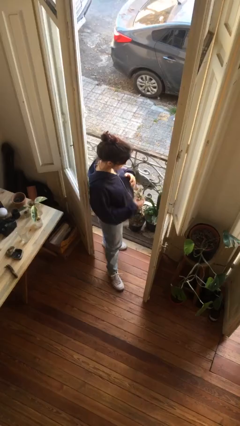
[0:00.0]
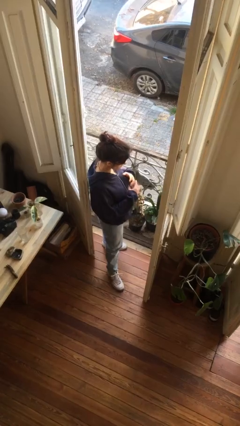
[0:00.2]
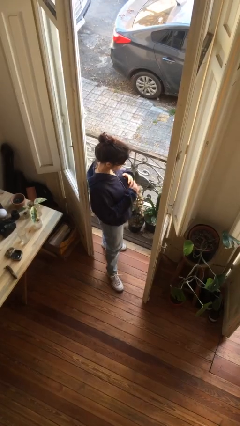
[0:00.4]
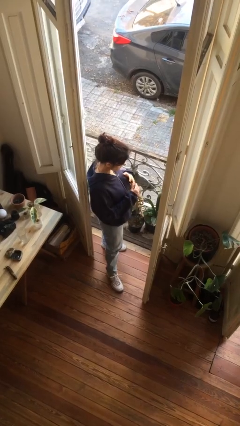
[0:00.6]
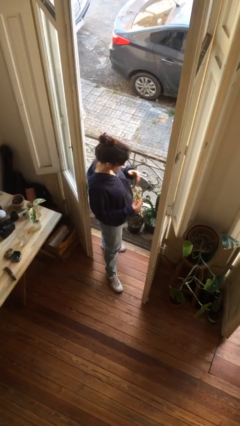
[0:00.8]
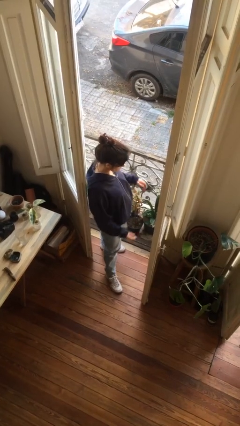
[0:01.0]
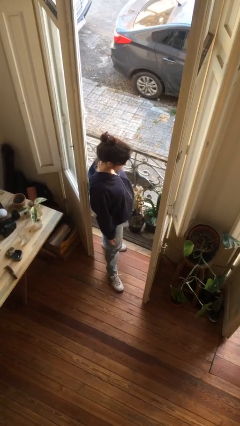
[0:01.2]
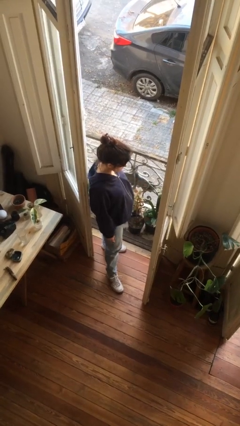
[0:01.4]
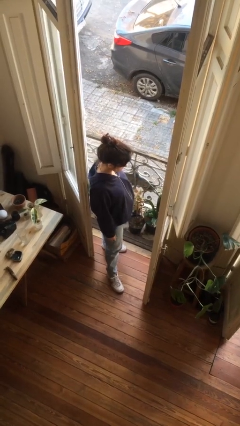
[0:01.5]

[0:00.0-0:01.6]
person takes off ring

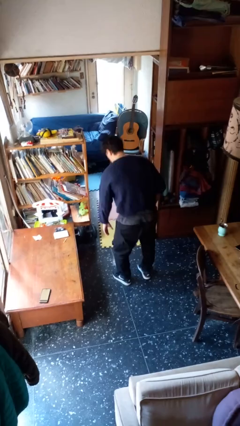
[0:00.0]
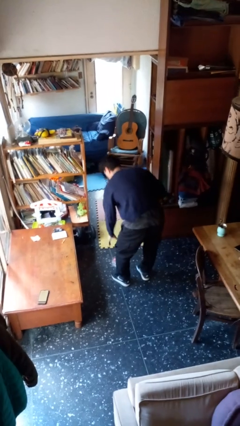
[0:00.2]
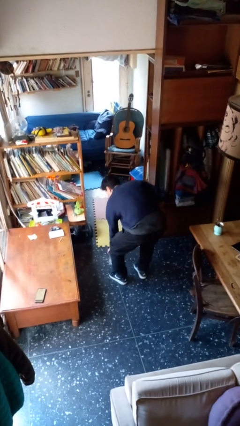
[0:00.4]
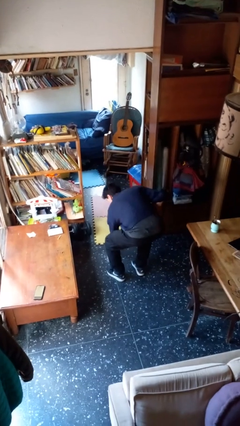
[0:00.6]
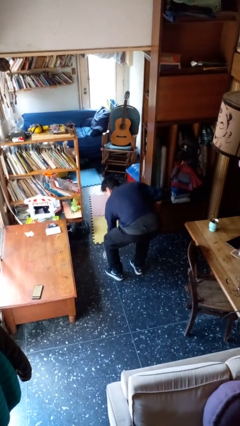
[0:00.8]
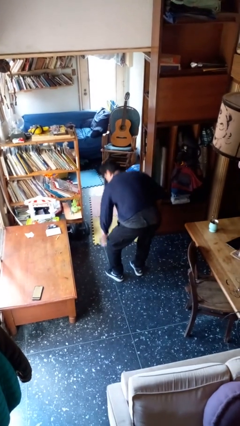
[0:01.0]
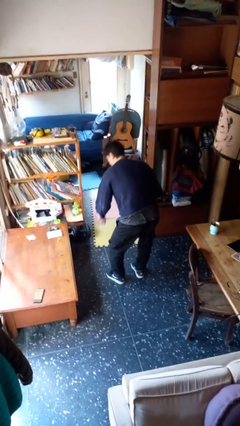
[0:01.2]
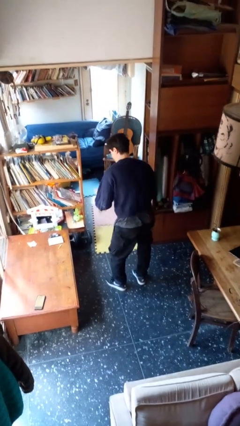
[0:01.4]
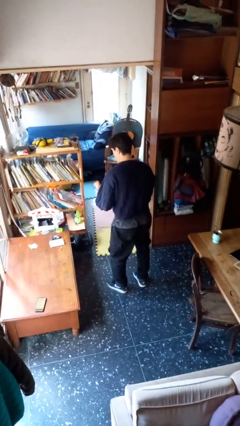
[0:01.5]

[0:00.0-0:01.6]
person picks up object from floor

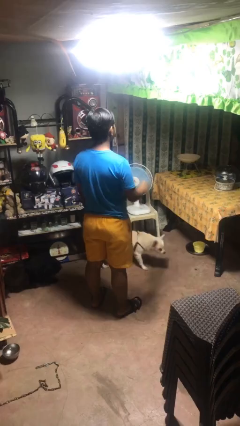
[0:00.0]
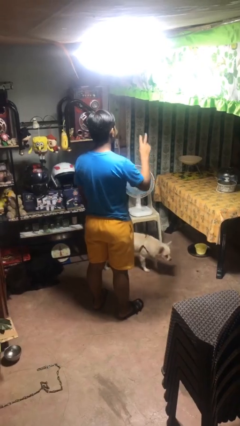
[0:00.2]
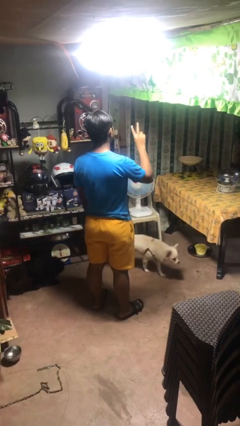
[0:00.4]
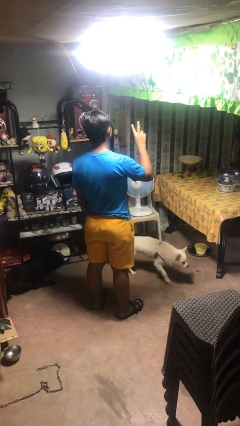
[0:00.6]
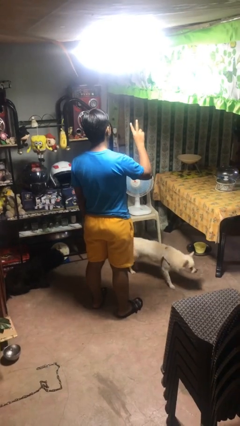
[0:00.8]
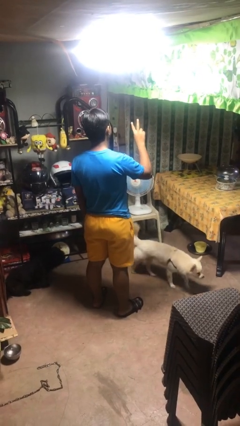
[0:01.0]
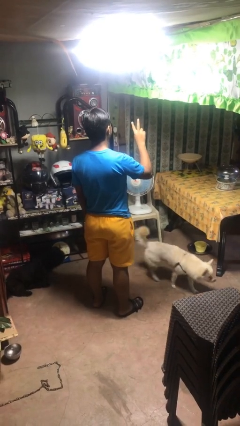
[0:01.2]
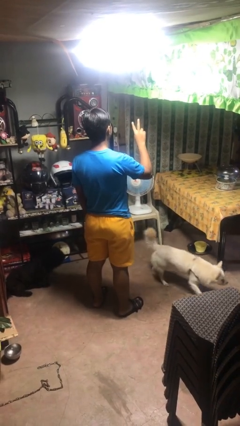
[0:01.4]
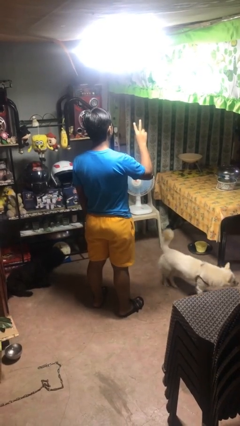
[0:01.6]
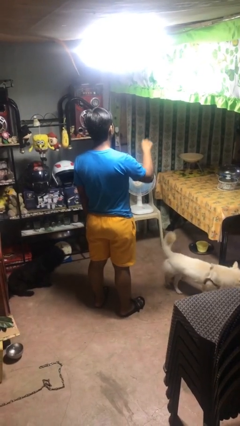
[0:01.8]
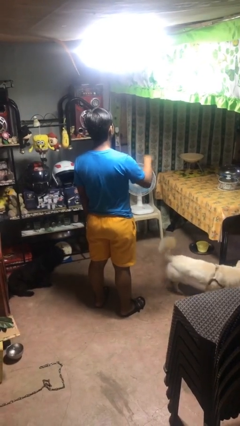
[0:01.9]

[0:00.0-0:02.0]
person gestures peace

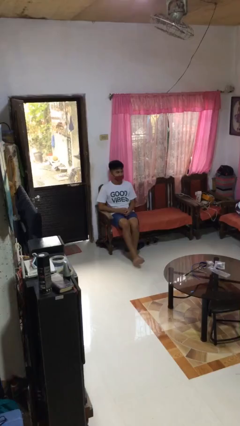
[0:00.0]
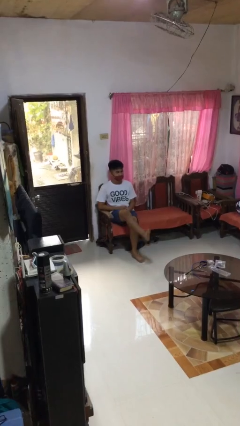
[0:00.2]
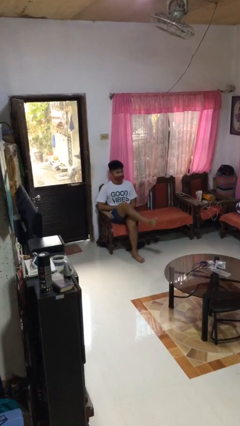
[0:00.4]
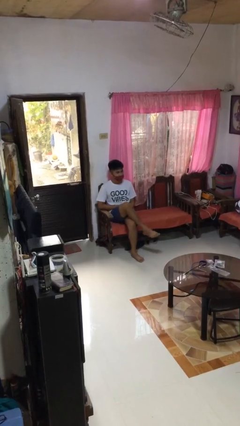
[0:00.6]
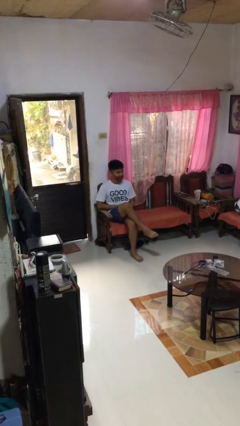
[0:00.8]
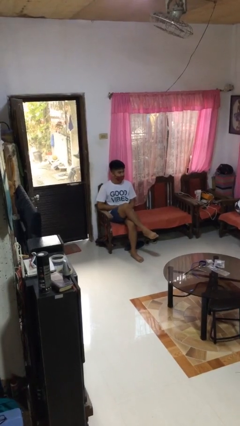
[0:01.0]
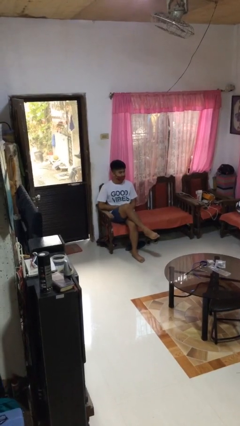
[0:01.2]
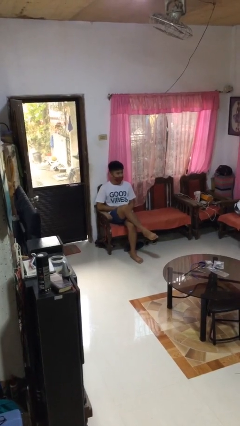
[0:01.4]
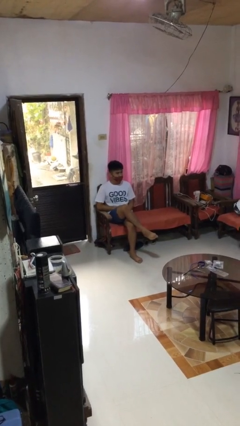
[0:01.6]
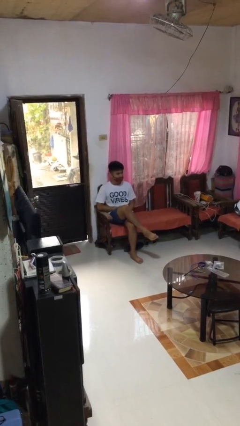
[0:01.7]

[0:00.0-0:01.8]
person crosses legs

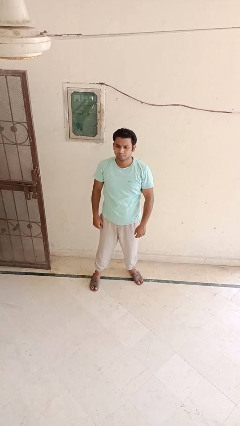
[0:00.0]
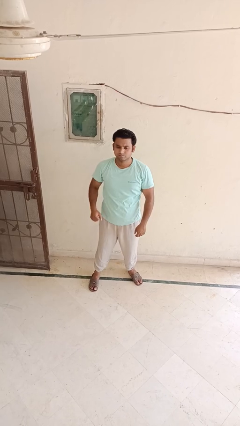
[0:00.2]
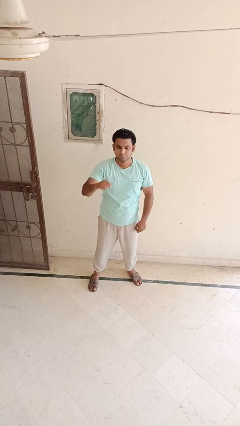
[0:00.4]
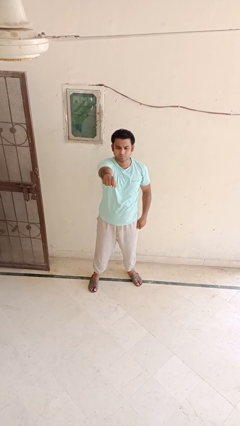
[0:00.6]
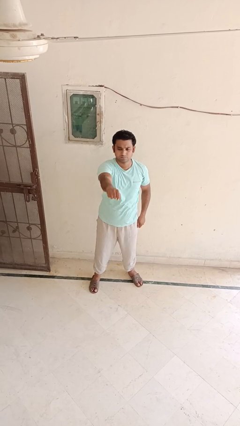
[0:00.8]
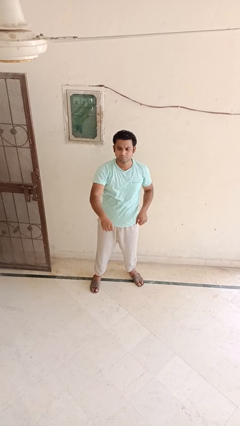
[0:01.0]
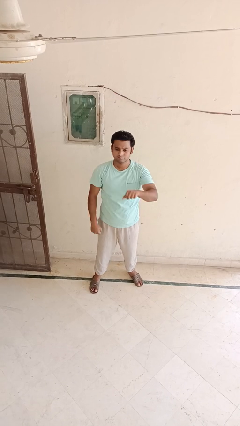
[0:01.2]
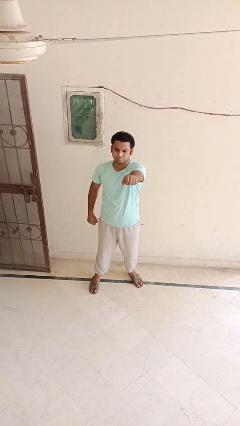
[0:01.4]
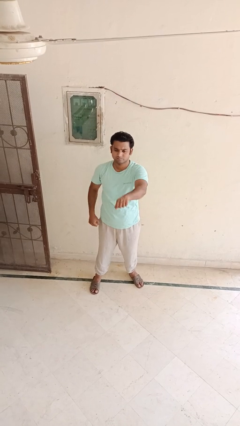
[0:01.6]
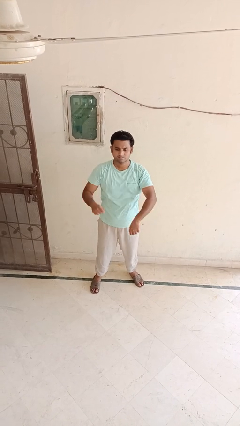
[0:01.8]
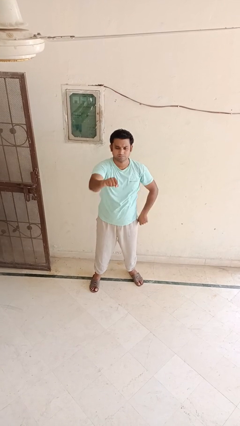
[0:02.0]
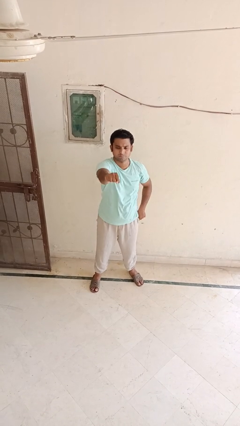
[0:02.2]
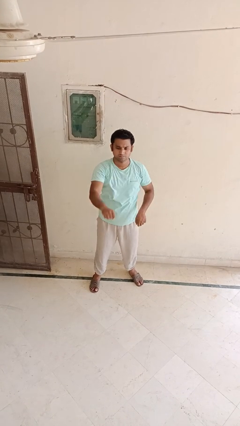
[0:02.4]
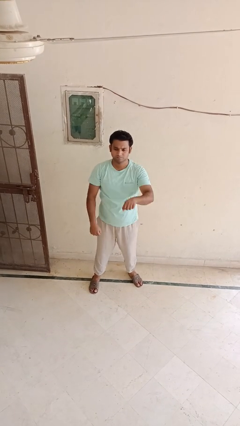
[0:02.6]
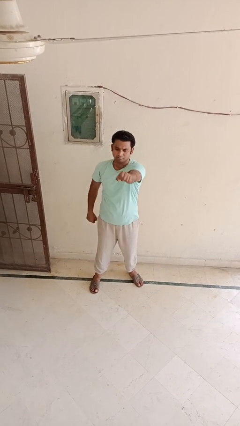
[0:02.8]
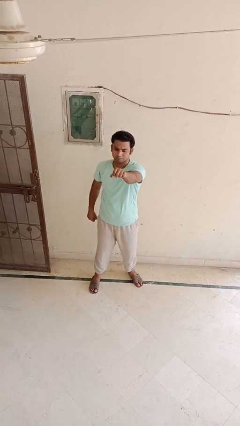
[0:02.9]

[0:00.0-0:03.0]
person punches

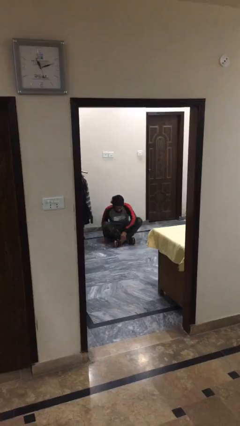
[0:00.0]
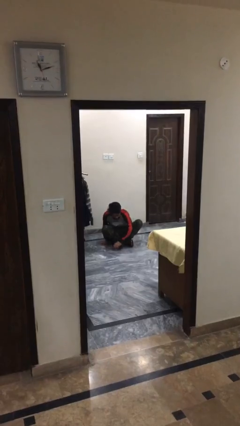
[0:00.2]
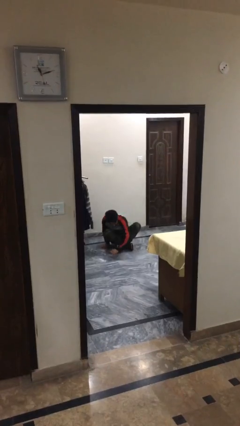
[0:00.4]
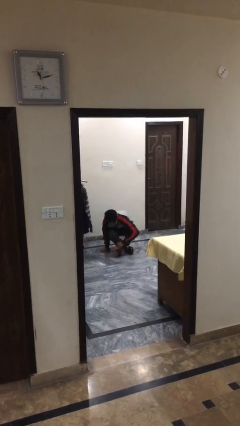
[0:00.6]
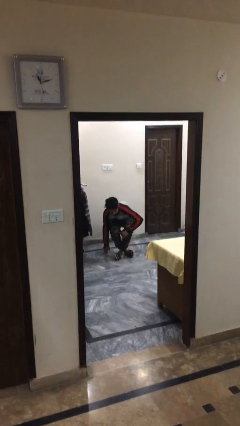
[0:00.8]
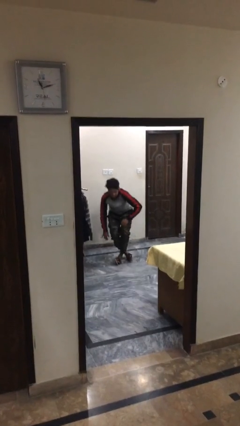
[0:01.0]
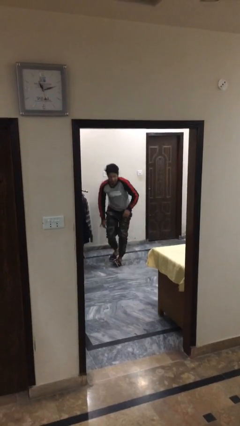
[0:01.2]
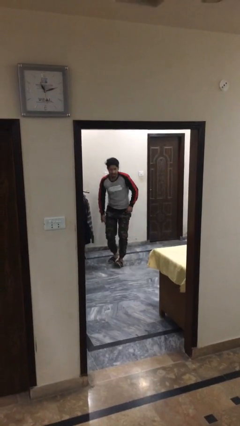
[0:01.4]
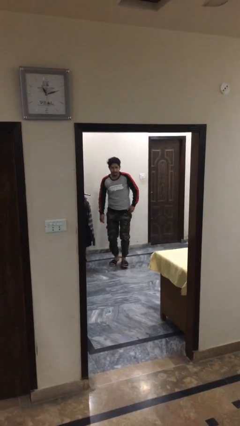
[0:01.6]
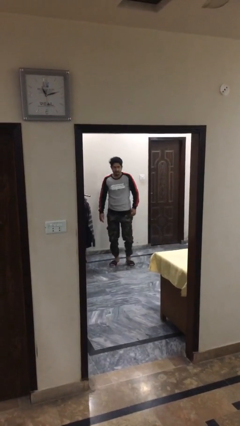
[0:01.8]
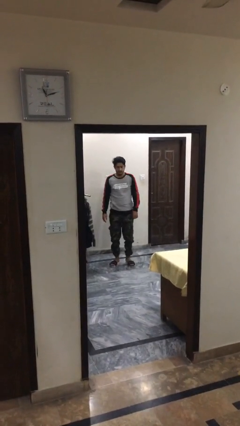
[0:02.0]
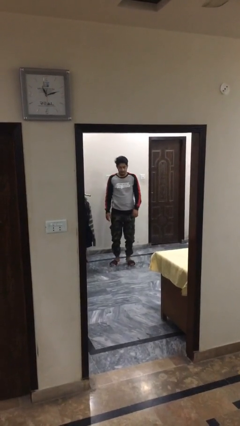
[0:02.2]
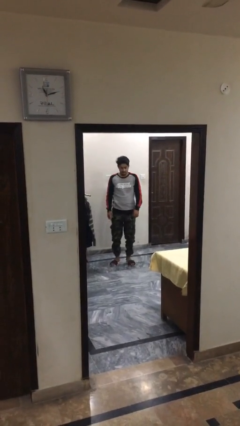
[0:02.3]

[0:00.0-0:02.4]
person stands up

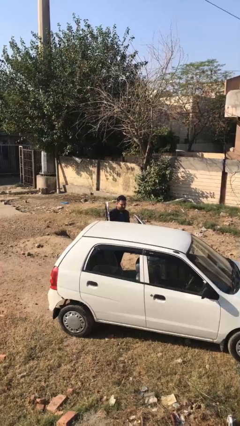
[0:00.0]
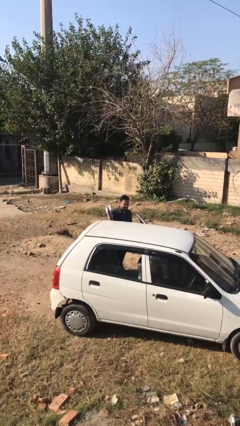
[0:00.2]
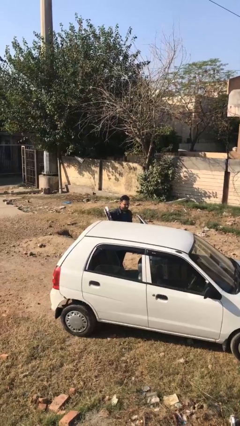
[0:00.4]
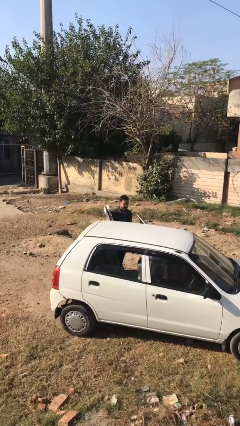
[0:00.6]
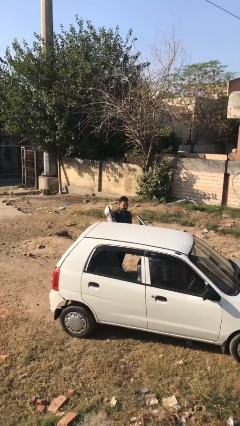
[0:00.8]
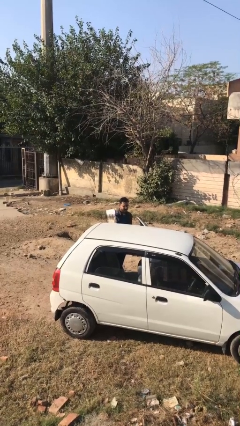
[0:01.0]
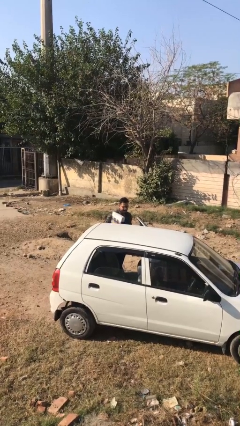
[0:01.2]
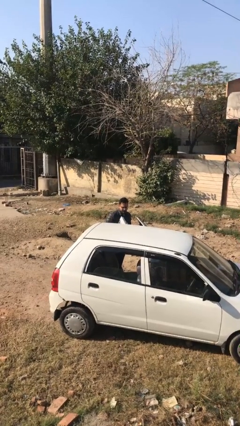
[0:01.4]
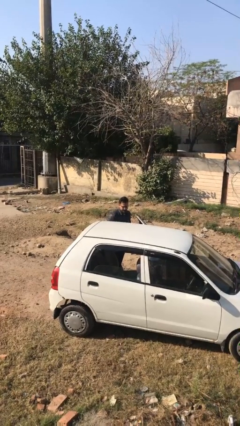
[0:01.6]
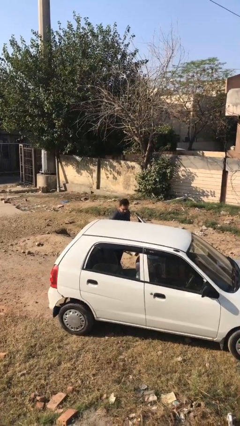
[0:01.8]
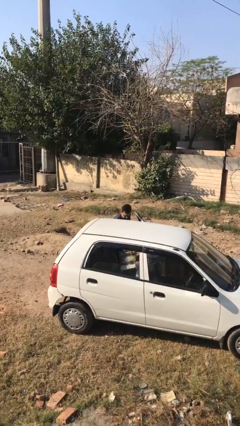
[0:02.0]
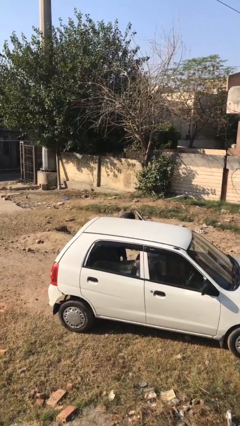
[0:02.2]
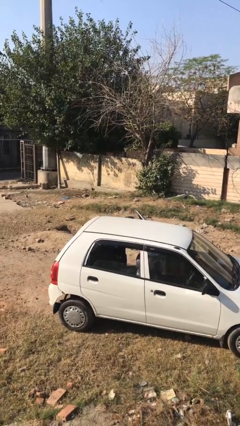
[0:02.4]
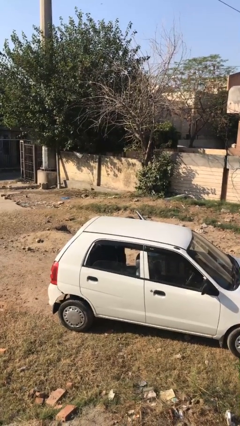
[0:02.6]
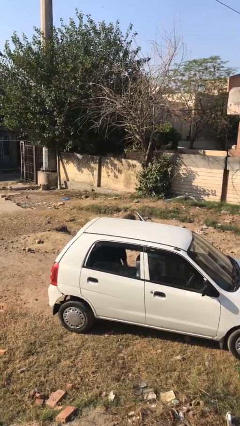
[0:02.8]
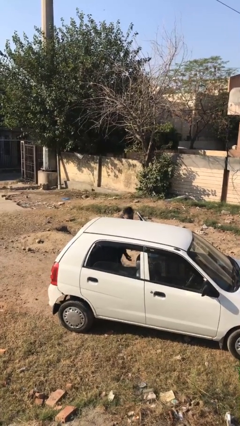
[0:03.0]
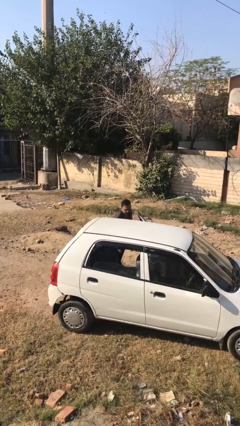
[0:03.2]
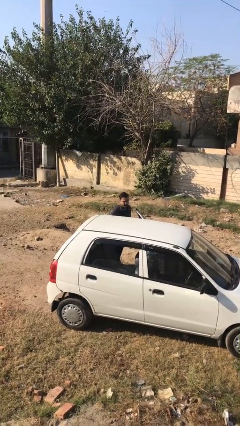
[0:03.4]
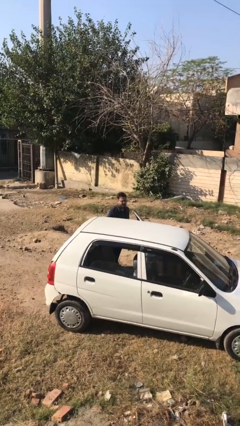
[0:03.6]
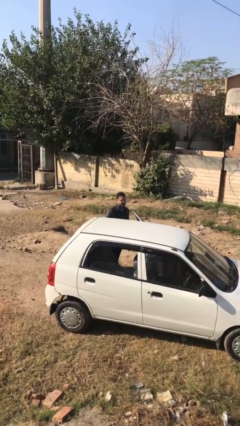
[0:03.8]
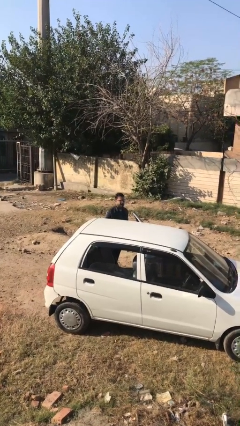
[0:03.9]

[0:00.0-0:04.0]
person loads car

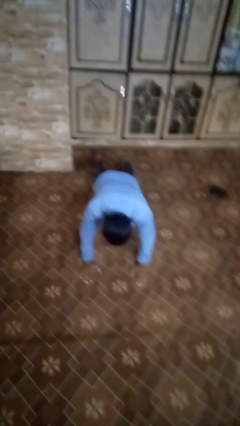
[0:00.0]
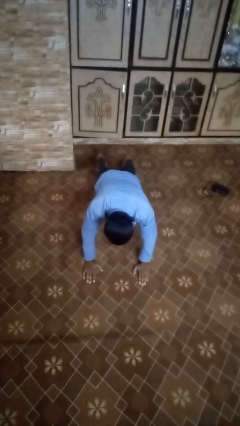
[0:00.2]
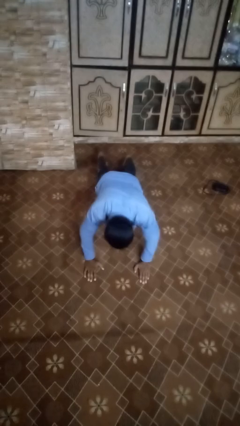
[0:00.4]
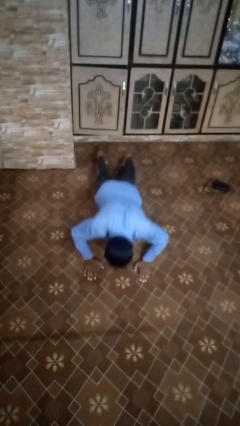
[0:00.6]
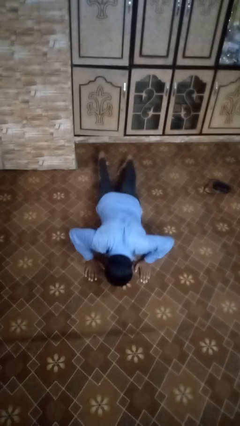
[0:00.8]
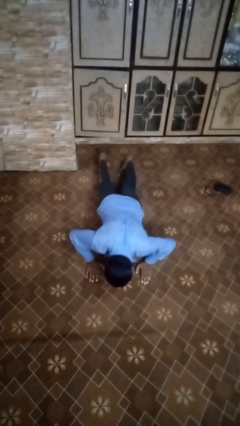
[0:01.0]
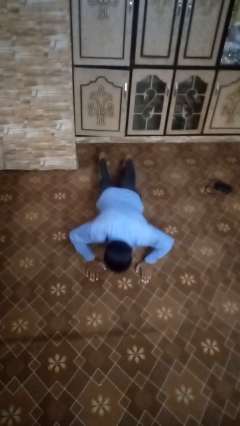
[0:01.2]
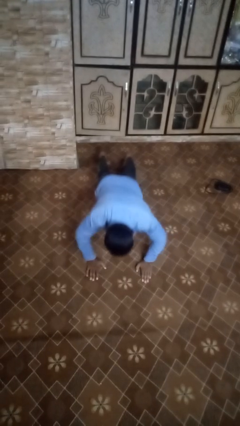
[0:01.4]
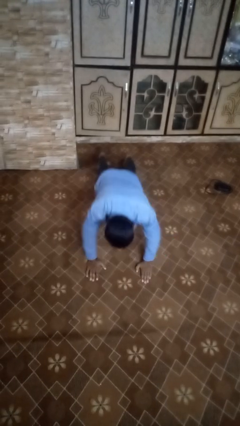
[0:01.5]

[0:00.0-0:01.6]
person exercises with pushup
